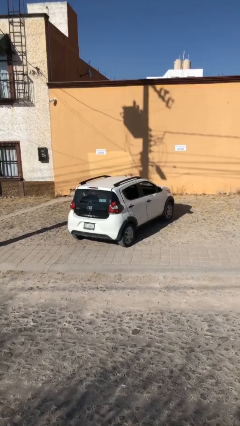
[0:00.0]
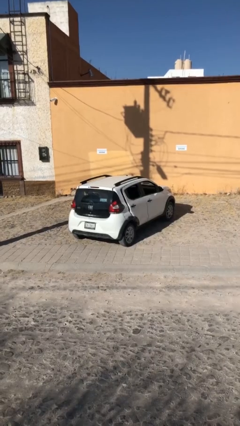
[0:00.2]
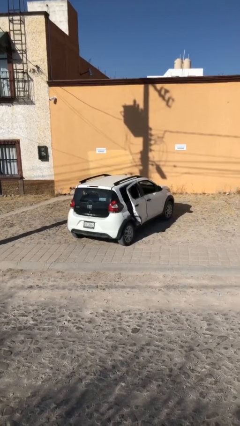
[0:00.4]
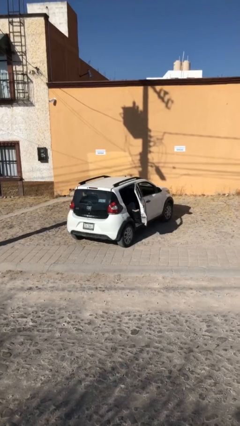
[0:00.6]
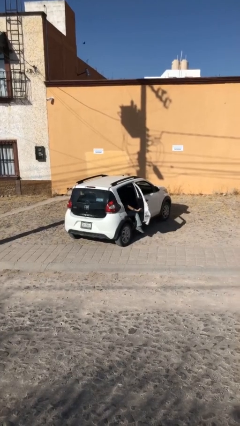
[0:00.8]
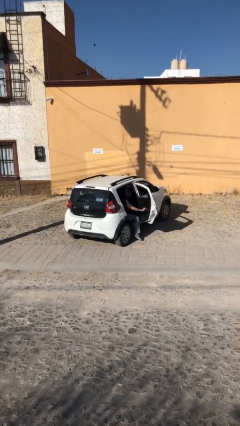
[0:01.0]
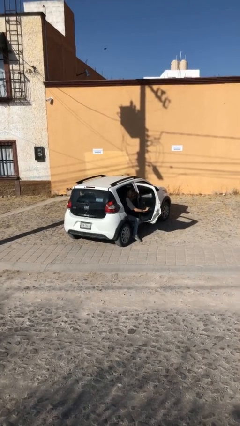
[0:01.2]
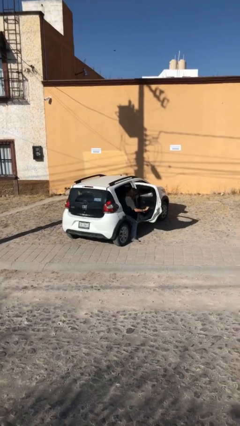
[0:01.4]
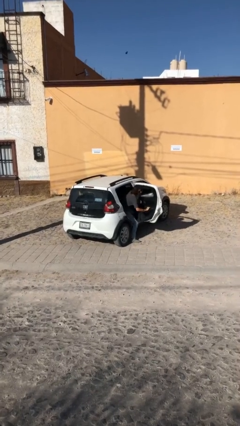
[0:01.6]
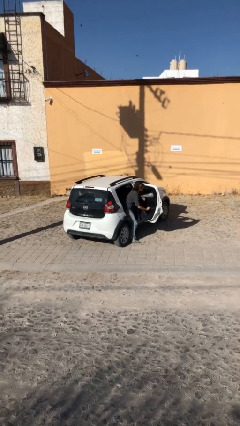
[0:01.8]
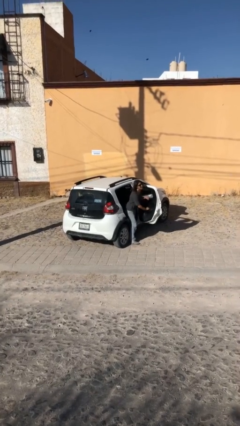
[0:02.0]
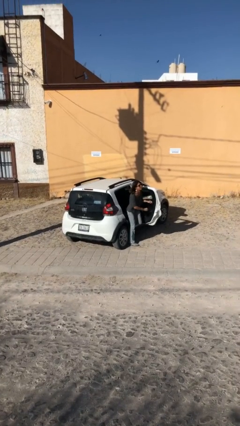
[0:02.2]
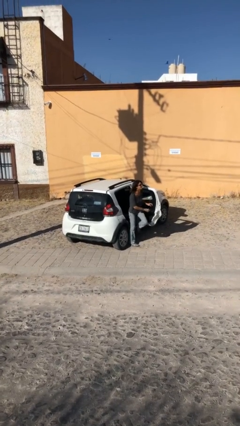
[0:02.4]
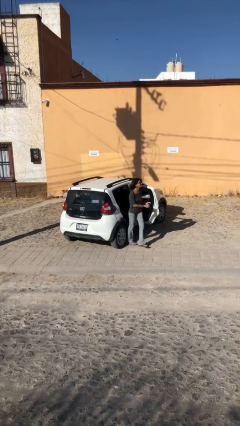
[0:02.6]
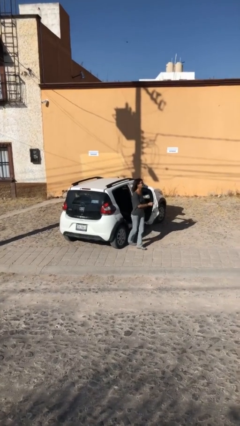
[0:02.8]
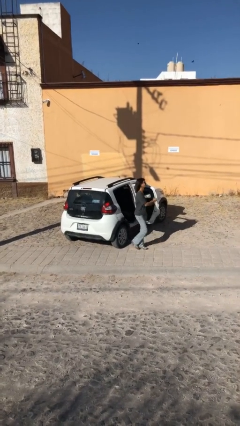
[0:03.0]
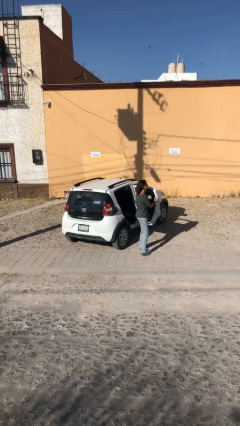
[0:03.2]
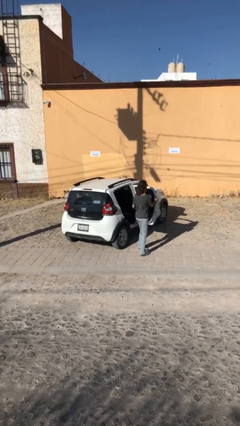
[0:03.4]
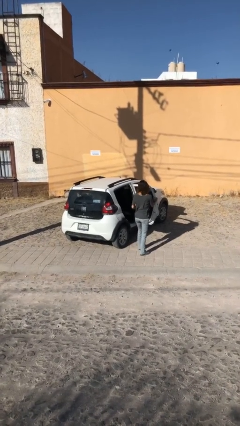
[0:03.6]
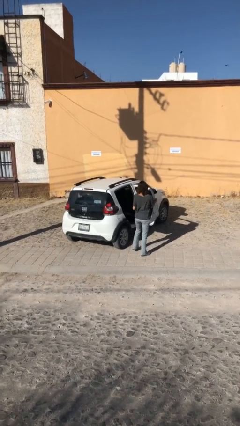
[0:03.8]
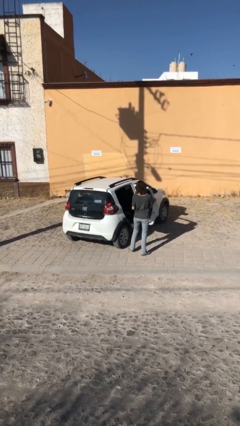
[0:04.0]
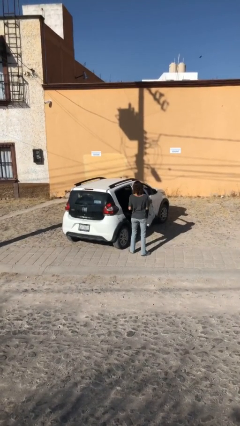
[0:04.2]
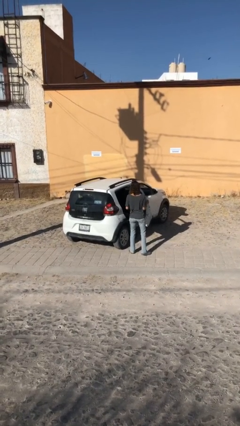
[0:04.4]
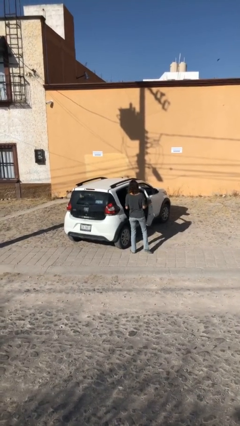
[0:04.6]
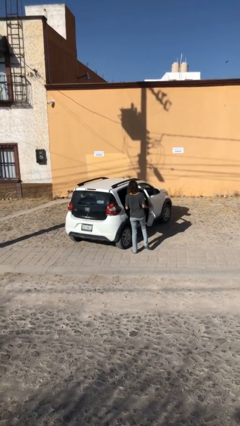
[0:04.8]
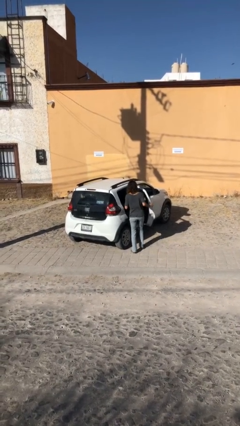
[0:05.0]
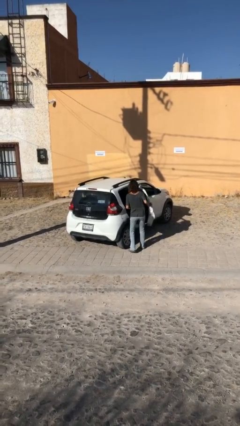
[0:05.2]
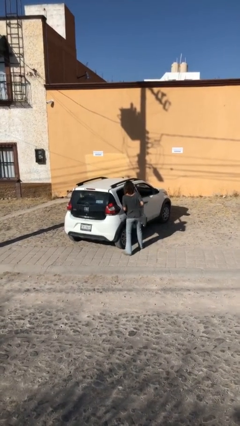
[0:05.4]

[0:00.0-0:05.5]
car drops off person

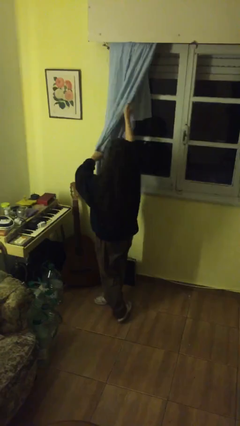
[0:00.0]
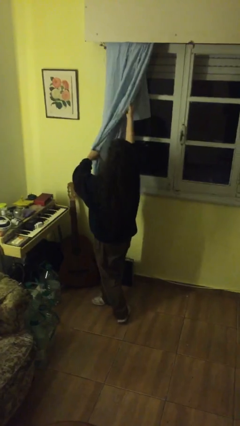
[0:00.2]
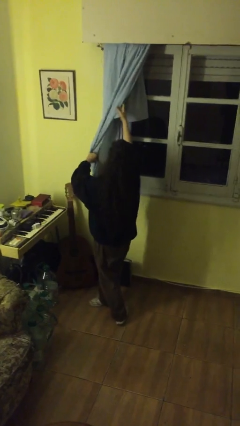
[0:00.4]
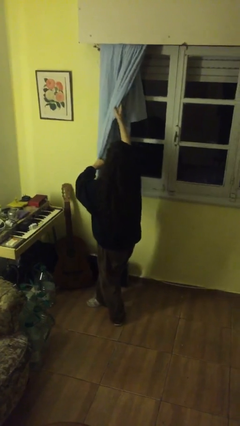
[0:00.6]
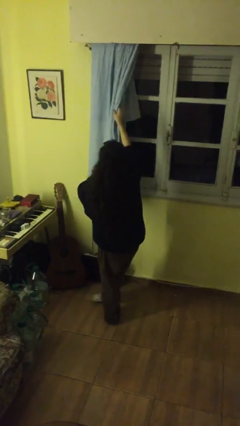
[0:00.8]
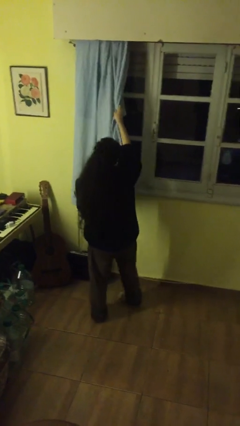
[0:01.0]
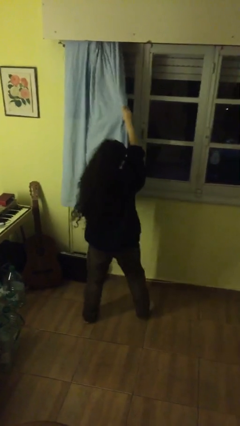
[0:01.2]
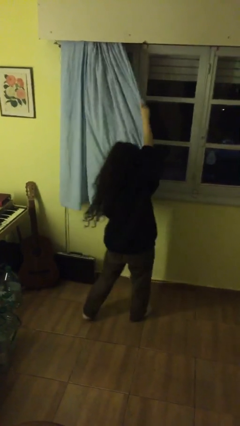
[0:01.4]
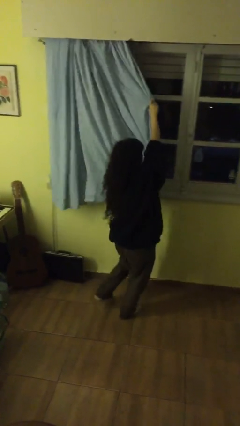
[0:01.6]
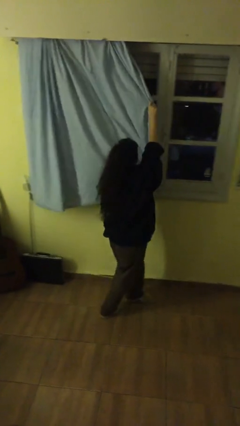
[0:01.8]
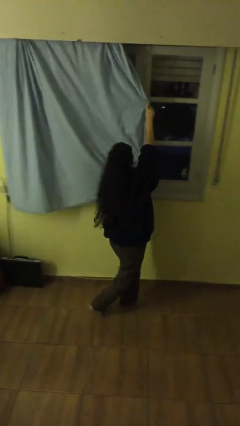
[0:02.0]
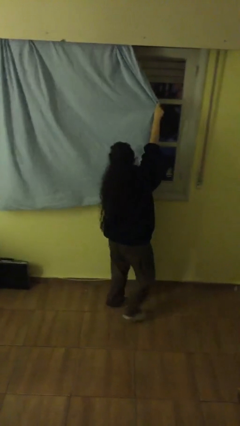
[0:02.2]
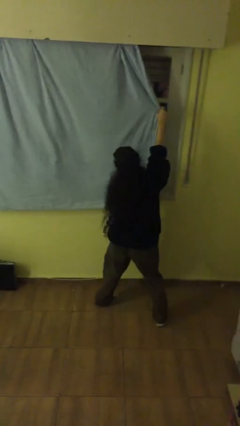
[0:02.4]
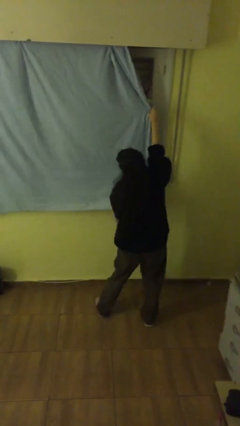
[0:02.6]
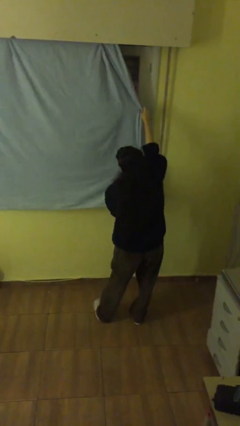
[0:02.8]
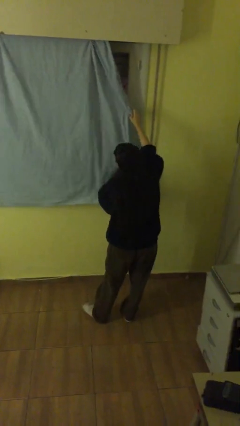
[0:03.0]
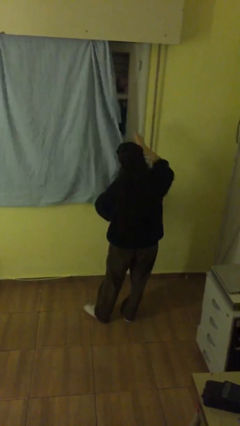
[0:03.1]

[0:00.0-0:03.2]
person closes curtains

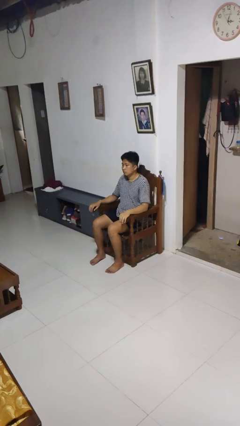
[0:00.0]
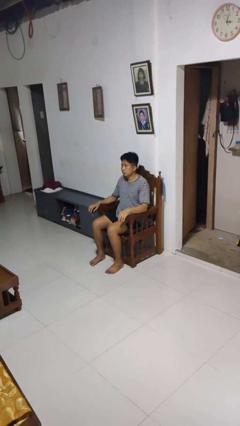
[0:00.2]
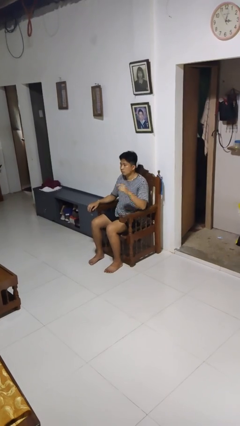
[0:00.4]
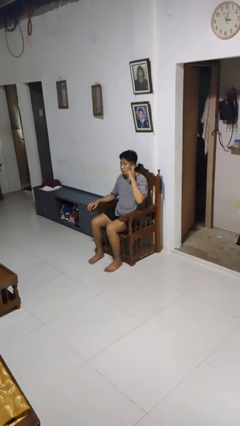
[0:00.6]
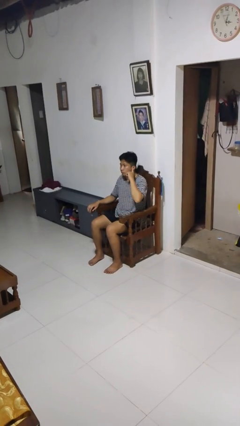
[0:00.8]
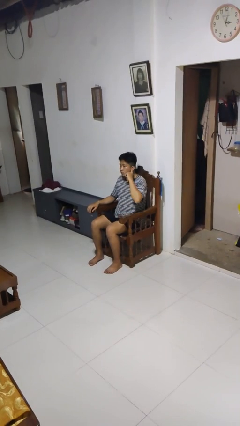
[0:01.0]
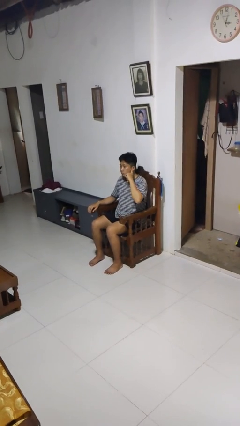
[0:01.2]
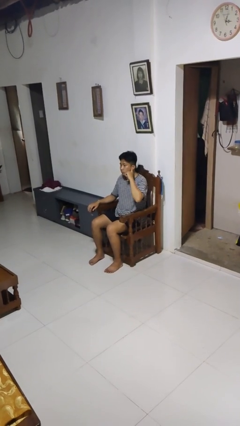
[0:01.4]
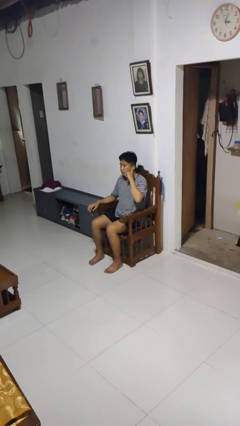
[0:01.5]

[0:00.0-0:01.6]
person gestures listen closely

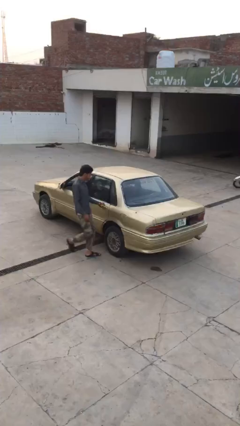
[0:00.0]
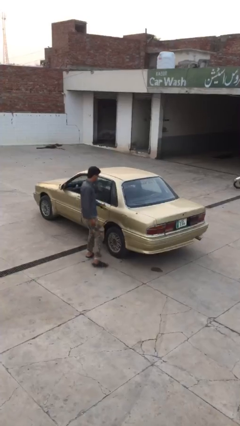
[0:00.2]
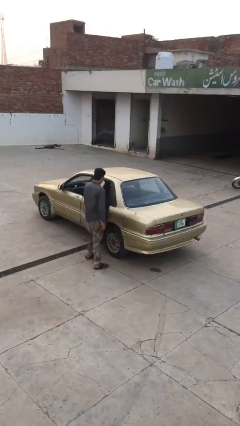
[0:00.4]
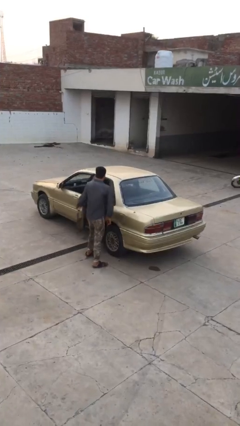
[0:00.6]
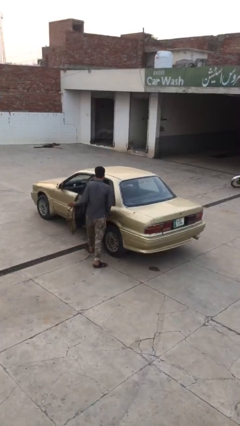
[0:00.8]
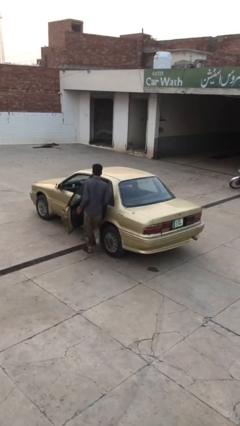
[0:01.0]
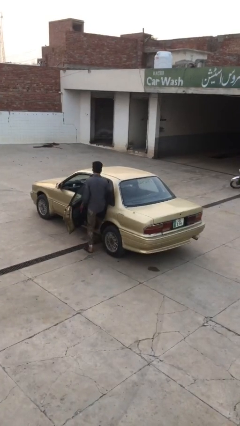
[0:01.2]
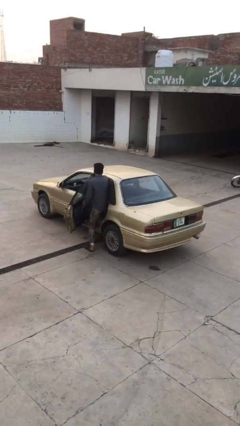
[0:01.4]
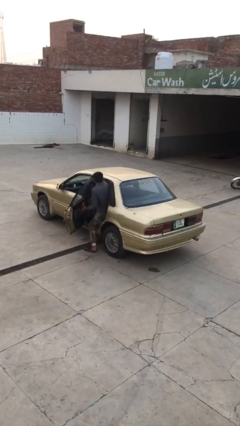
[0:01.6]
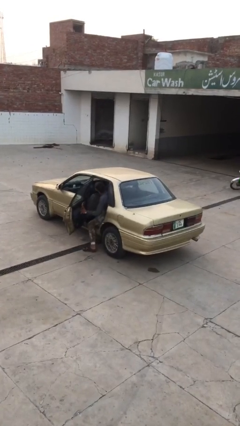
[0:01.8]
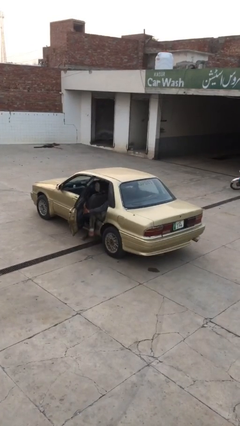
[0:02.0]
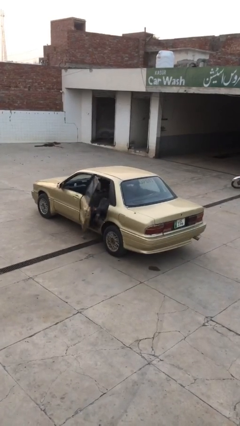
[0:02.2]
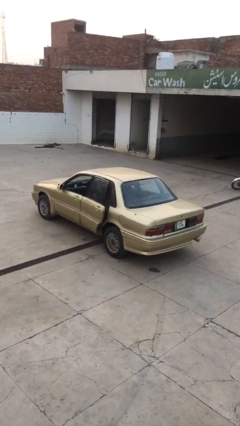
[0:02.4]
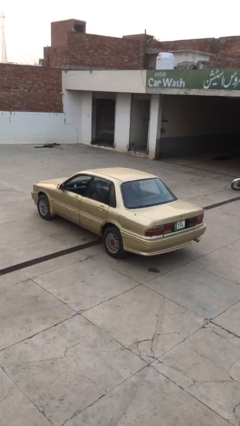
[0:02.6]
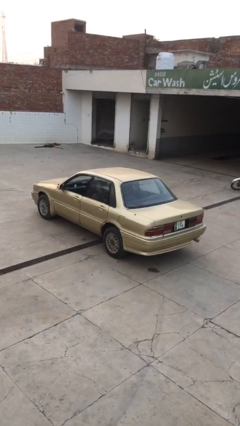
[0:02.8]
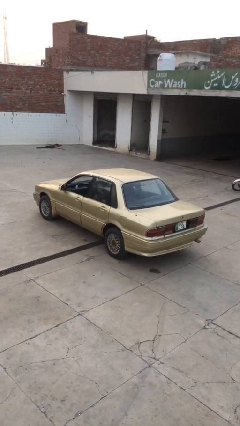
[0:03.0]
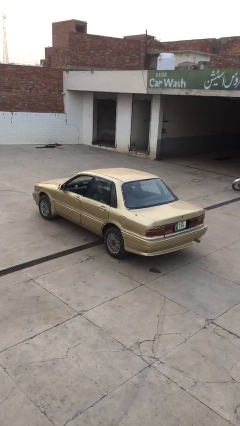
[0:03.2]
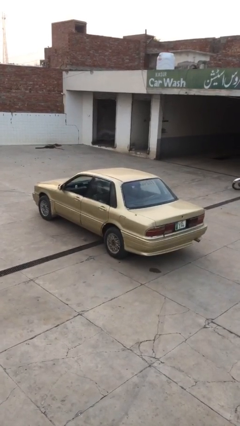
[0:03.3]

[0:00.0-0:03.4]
car picks up person

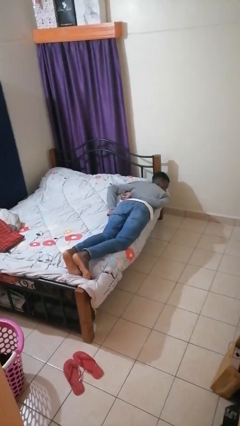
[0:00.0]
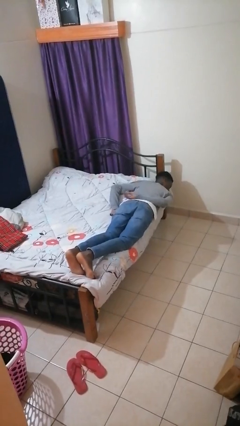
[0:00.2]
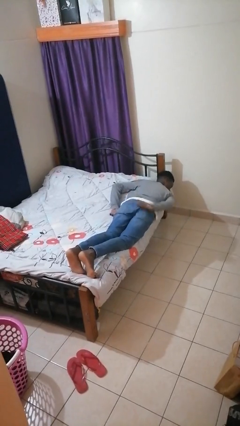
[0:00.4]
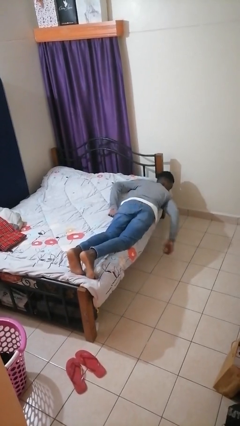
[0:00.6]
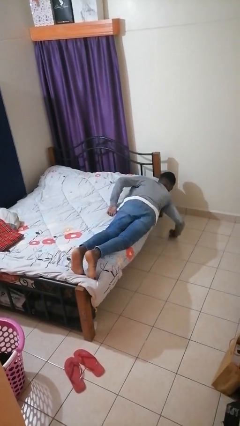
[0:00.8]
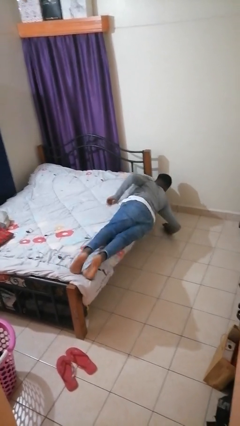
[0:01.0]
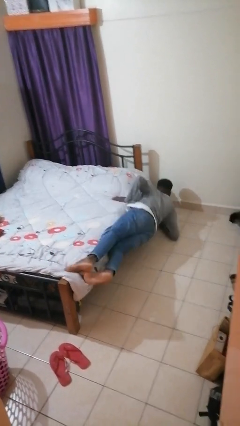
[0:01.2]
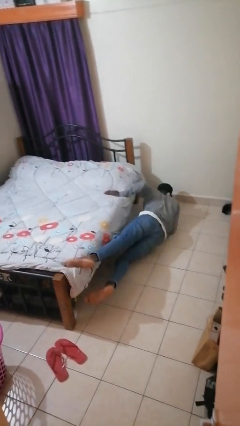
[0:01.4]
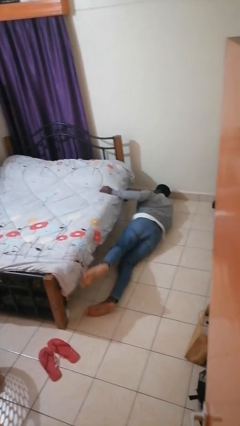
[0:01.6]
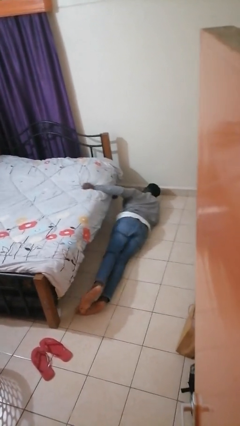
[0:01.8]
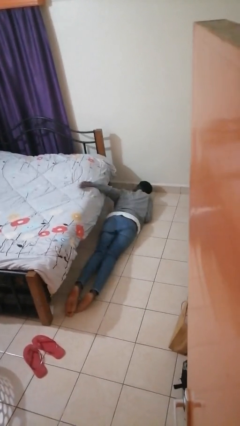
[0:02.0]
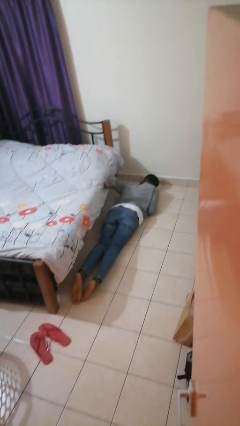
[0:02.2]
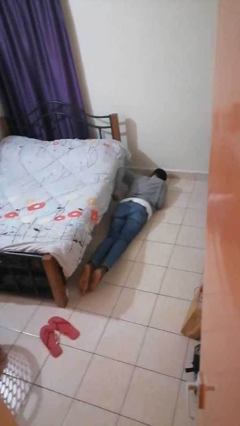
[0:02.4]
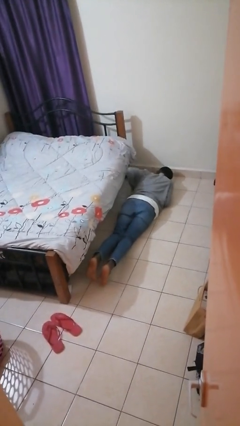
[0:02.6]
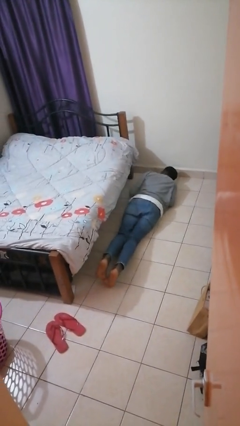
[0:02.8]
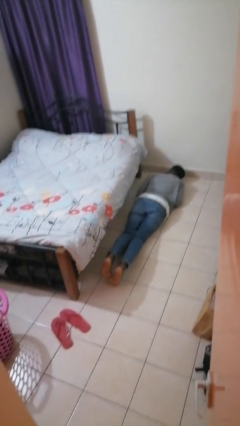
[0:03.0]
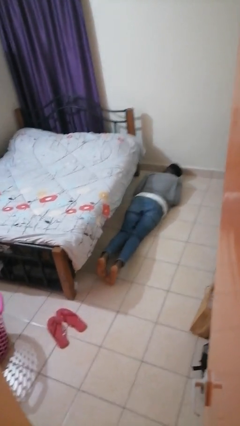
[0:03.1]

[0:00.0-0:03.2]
person falls from bed

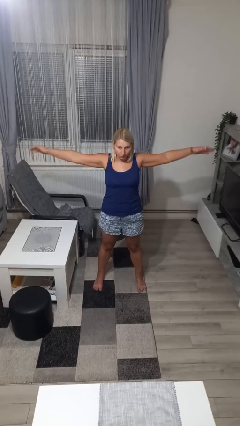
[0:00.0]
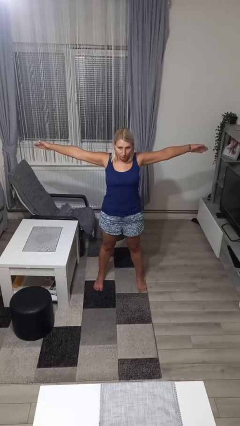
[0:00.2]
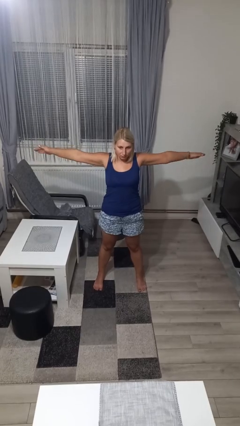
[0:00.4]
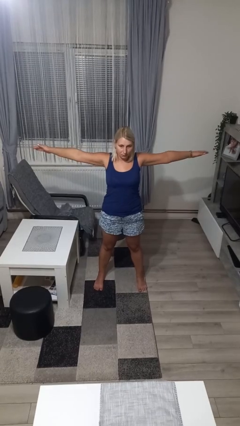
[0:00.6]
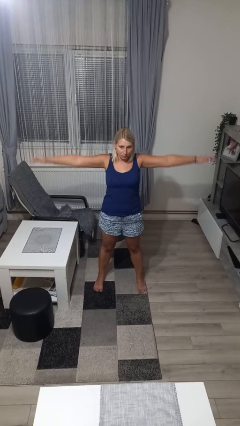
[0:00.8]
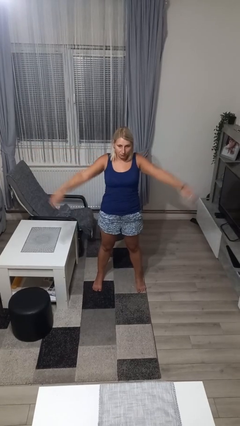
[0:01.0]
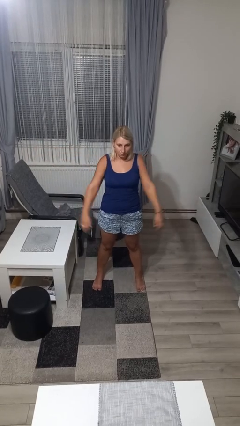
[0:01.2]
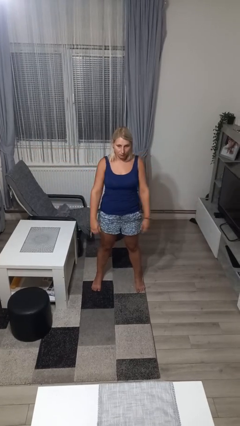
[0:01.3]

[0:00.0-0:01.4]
person stretches arms to side
